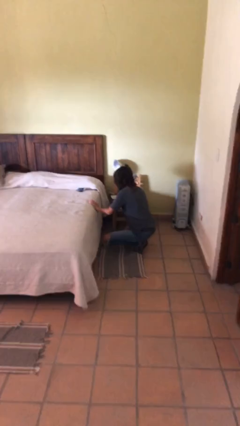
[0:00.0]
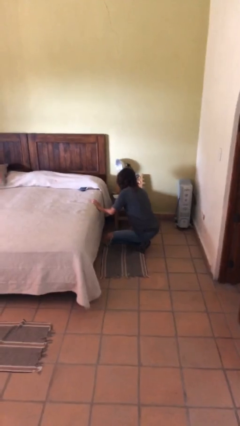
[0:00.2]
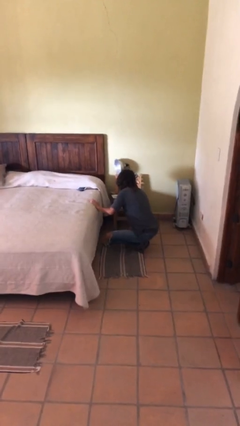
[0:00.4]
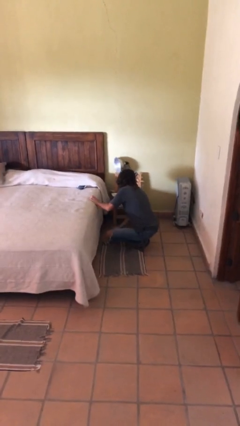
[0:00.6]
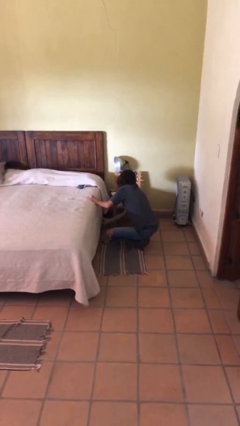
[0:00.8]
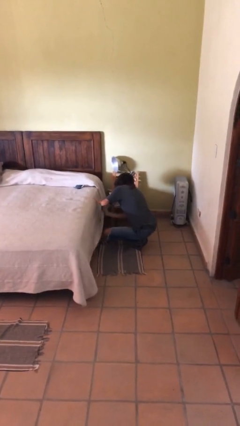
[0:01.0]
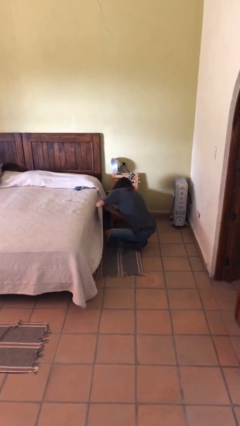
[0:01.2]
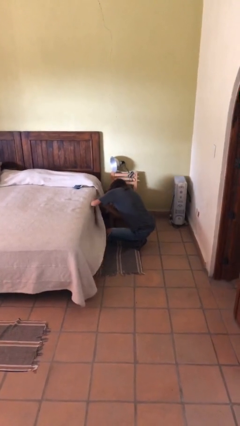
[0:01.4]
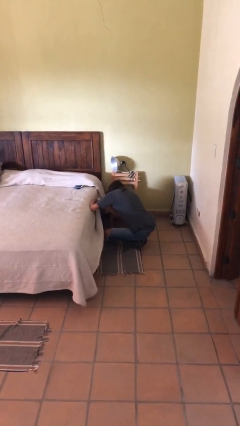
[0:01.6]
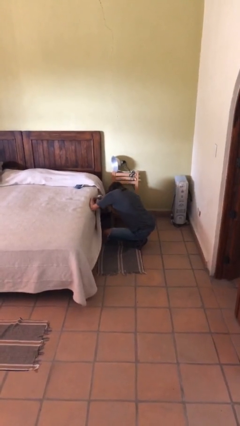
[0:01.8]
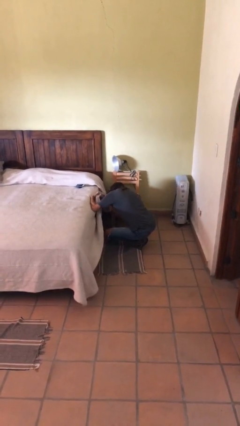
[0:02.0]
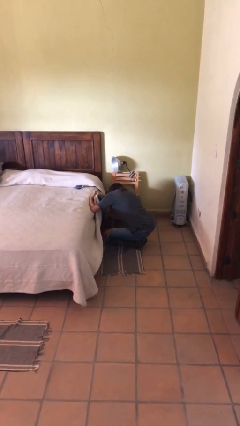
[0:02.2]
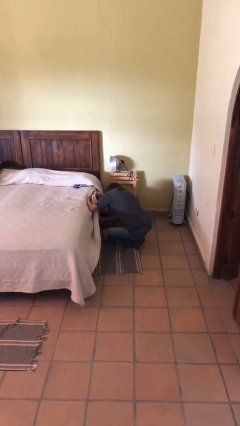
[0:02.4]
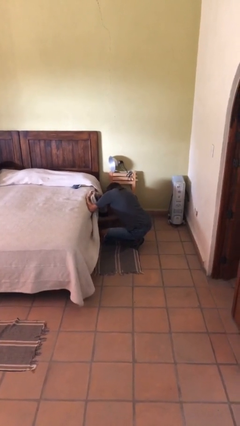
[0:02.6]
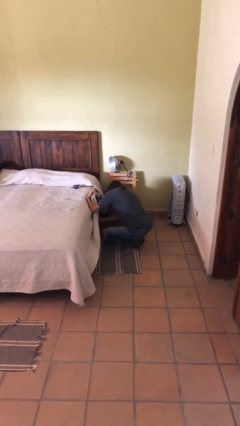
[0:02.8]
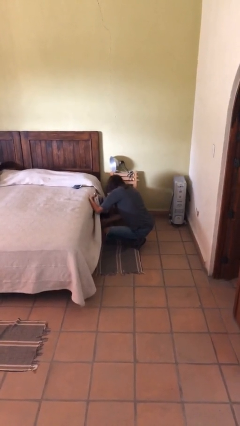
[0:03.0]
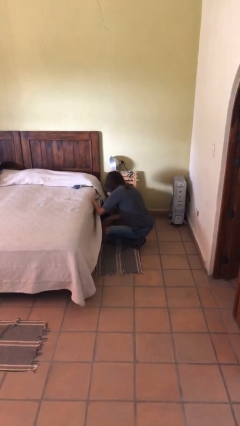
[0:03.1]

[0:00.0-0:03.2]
person searches under bed

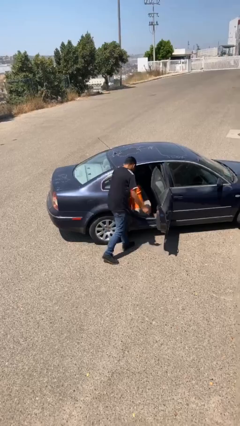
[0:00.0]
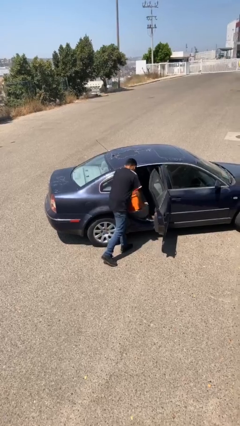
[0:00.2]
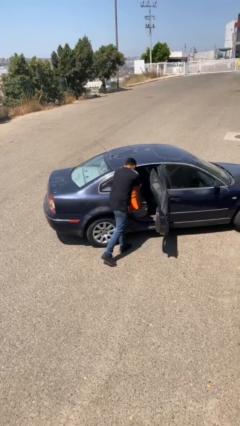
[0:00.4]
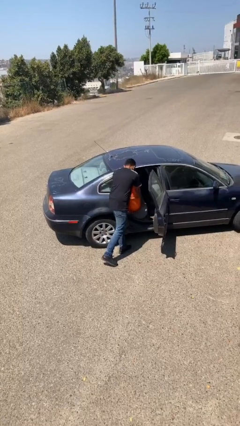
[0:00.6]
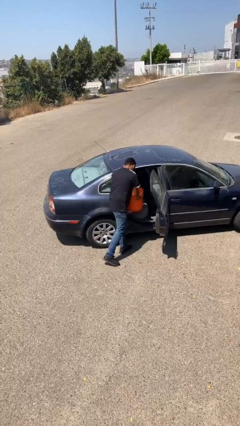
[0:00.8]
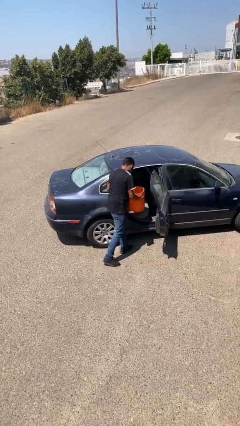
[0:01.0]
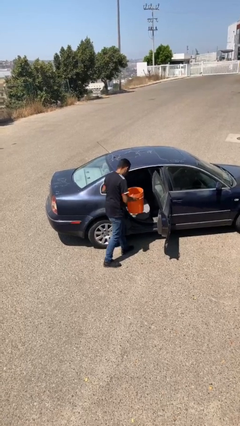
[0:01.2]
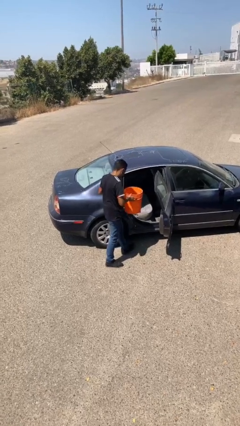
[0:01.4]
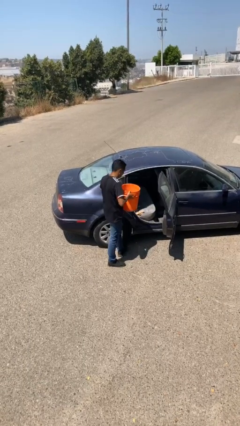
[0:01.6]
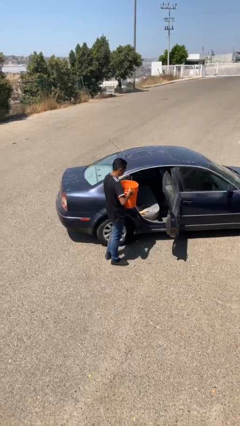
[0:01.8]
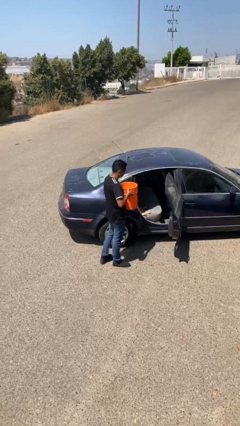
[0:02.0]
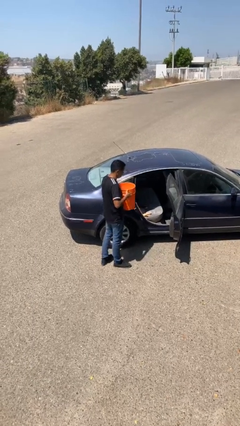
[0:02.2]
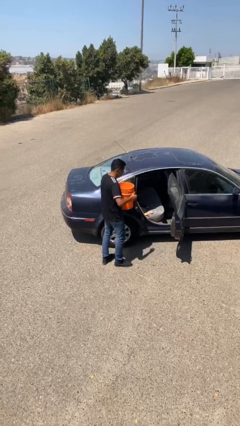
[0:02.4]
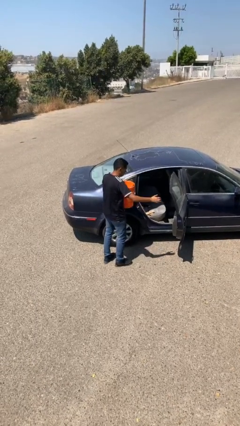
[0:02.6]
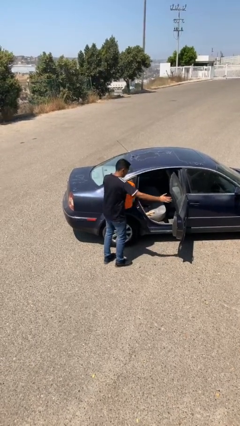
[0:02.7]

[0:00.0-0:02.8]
person unloads car

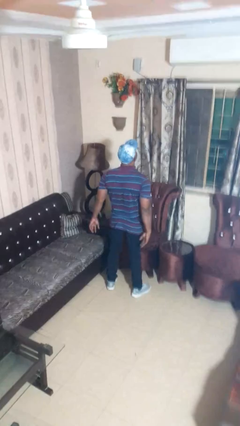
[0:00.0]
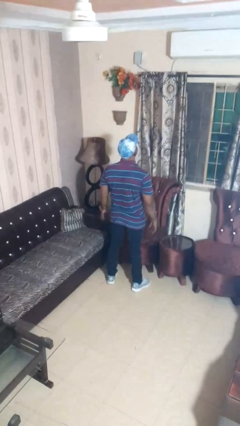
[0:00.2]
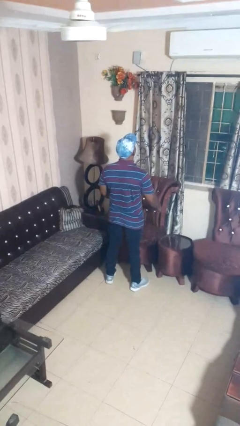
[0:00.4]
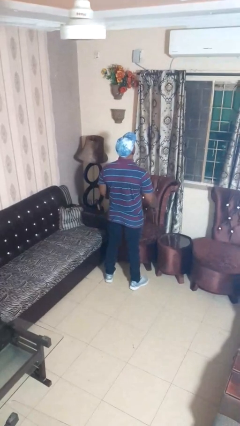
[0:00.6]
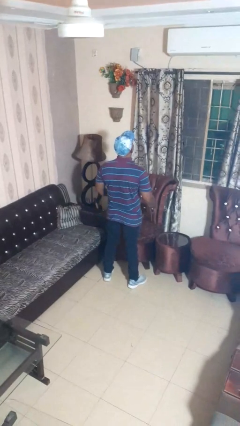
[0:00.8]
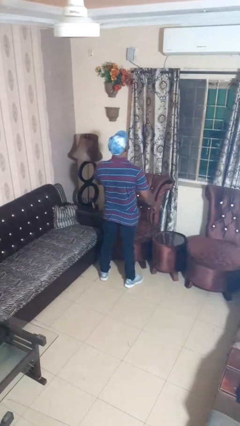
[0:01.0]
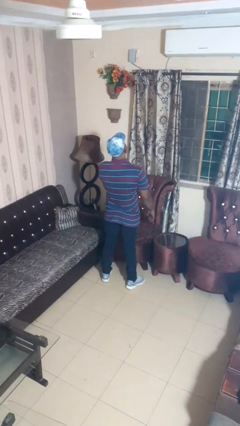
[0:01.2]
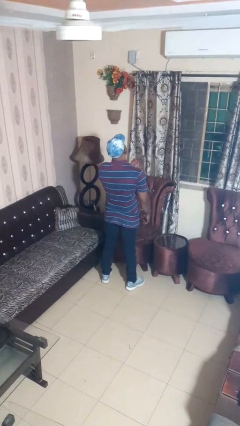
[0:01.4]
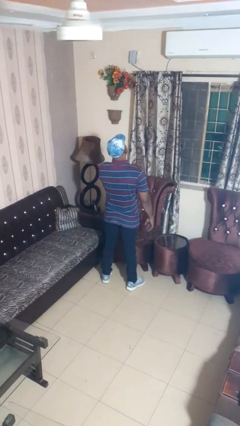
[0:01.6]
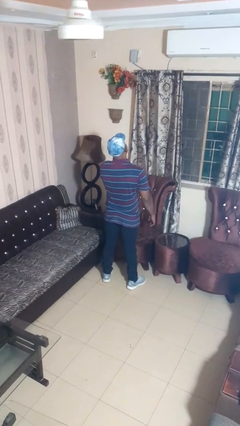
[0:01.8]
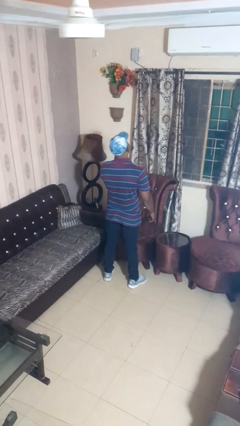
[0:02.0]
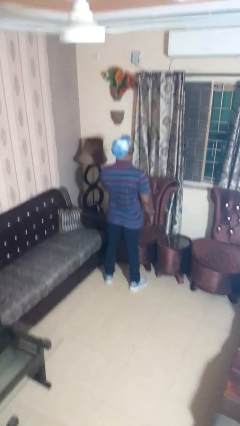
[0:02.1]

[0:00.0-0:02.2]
person drums on chest

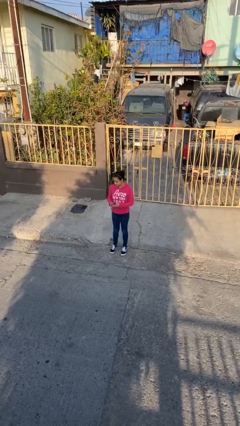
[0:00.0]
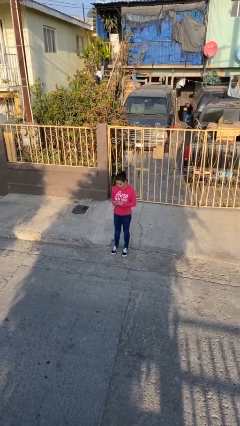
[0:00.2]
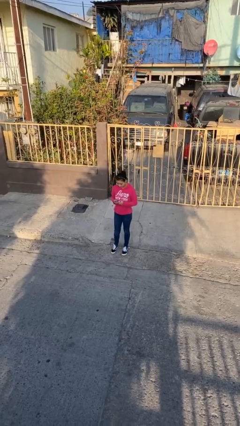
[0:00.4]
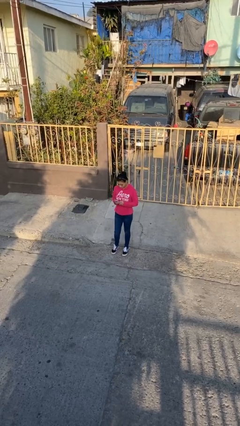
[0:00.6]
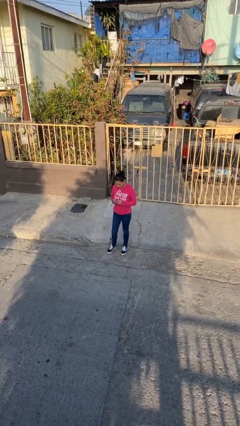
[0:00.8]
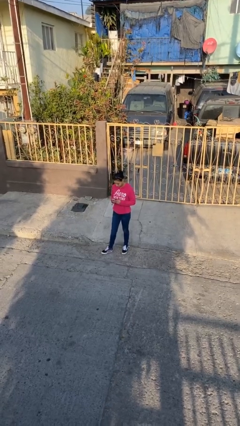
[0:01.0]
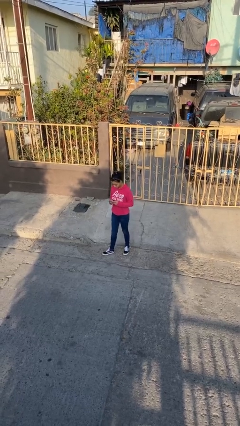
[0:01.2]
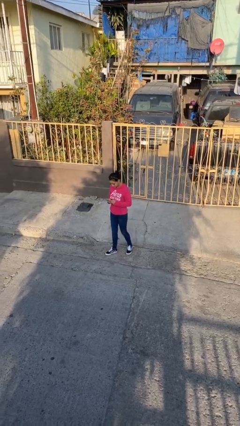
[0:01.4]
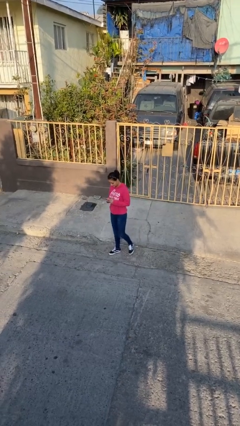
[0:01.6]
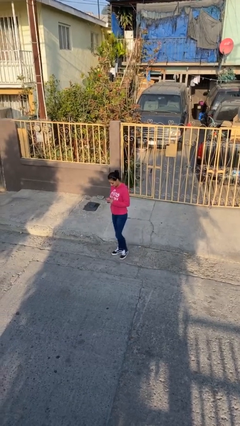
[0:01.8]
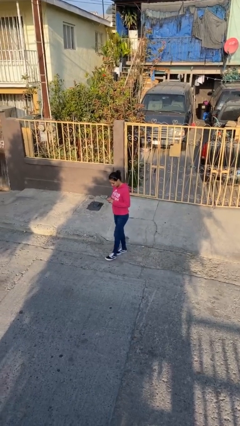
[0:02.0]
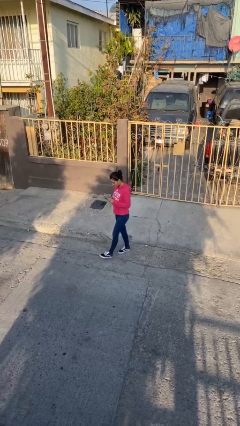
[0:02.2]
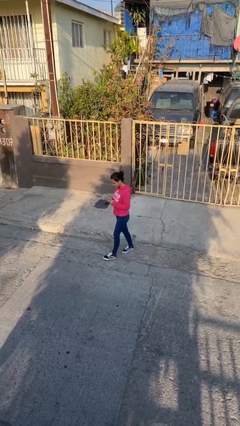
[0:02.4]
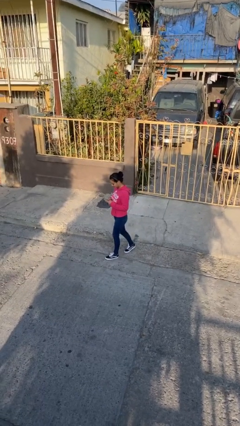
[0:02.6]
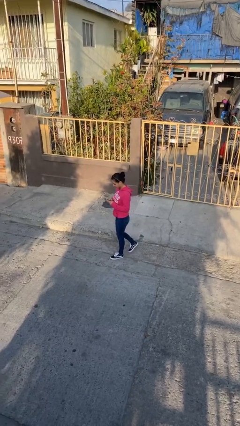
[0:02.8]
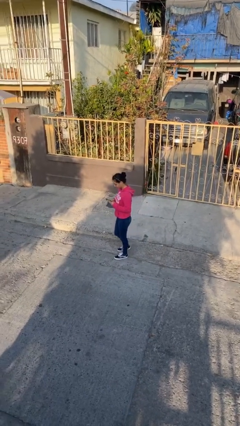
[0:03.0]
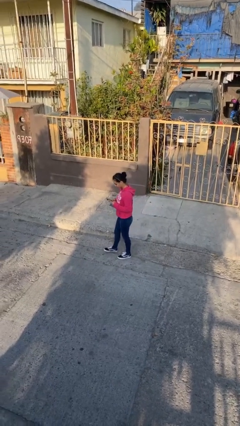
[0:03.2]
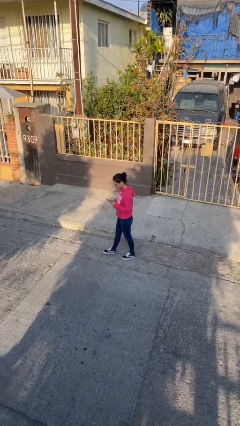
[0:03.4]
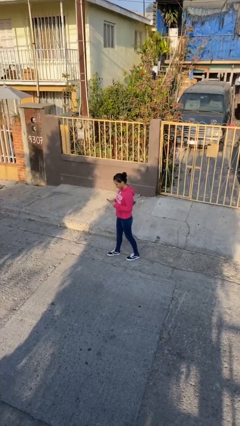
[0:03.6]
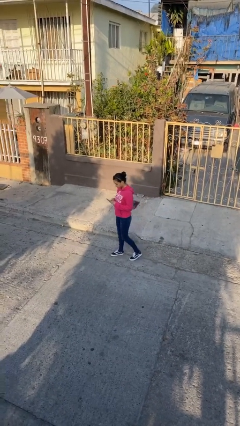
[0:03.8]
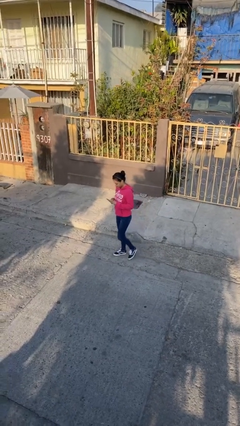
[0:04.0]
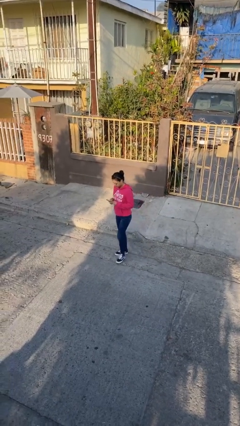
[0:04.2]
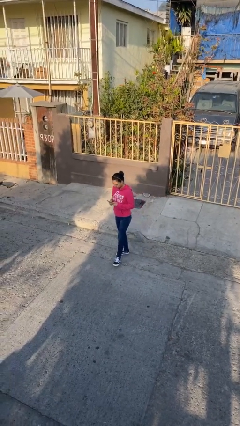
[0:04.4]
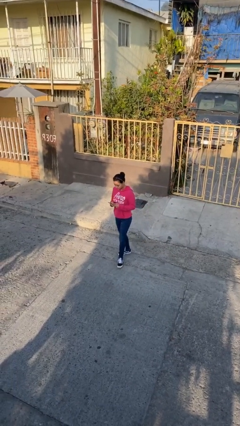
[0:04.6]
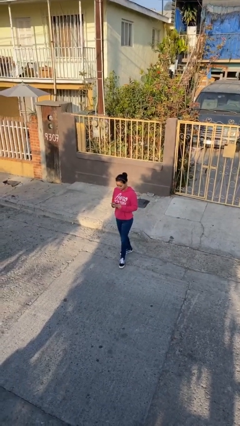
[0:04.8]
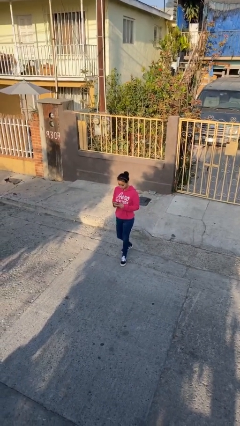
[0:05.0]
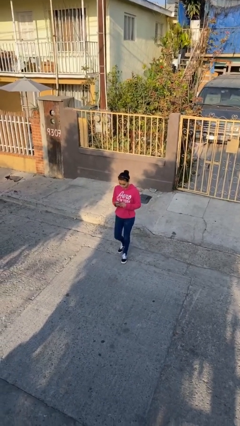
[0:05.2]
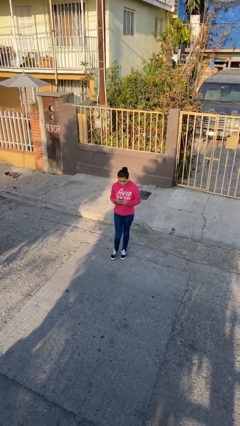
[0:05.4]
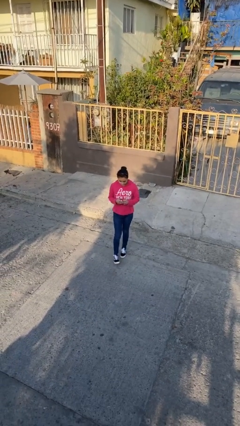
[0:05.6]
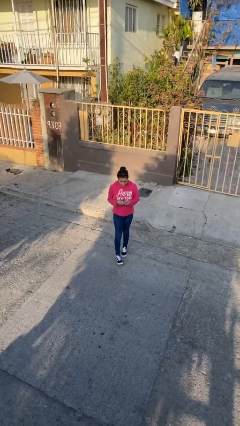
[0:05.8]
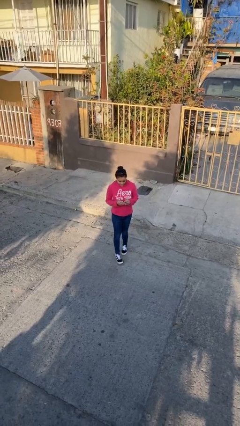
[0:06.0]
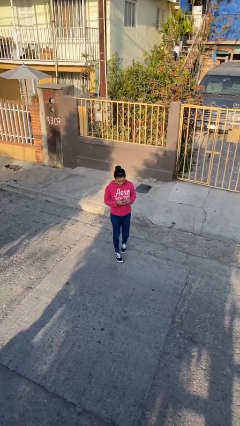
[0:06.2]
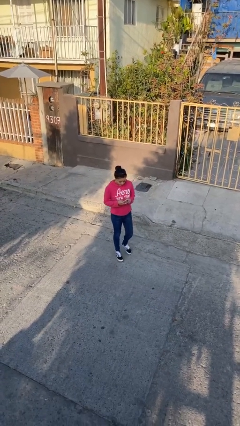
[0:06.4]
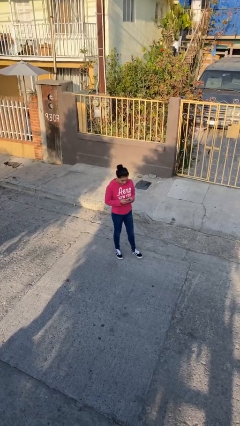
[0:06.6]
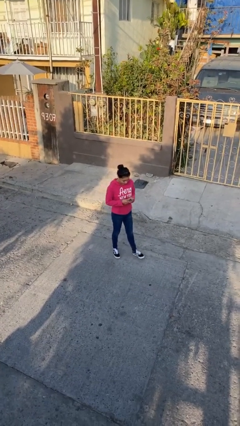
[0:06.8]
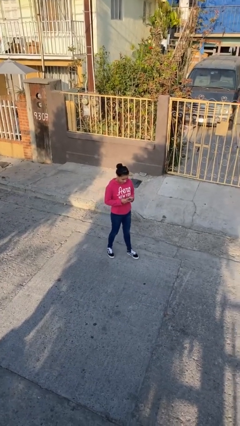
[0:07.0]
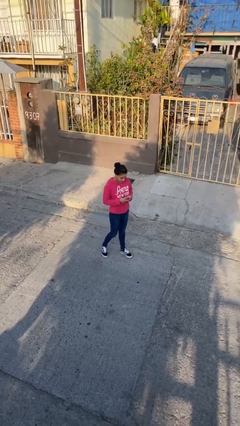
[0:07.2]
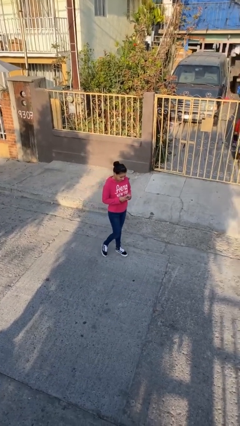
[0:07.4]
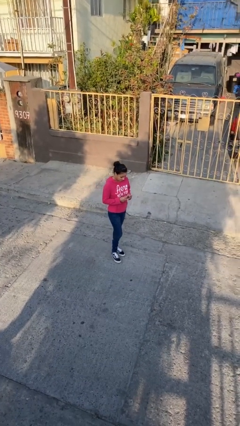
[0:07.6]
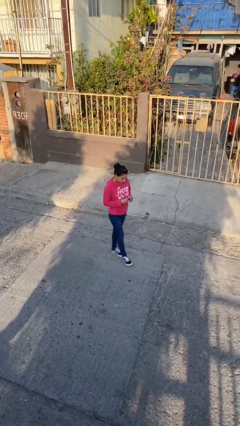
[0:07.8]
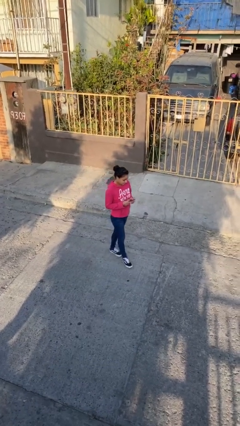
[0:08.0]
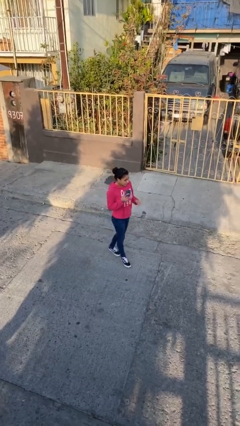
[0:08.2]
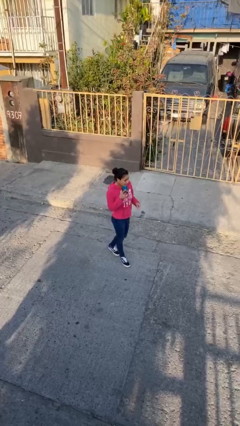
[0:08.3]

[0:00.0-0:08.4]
person texts on phone

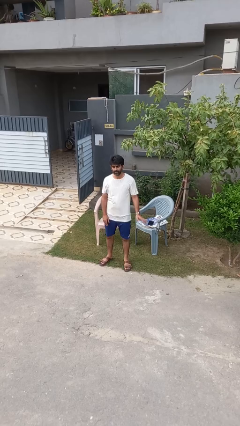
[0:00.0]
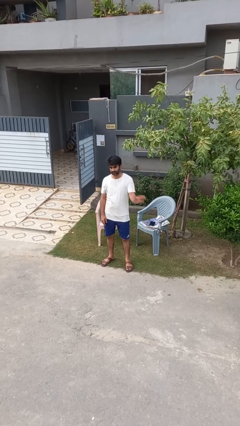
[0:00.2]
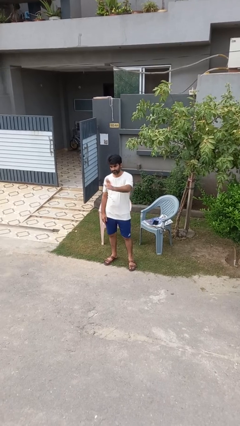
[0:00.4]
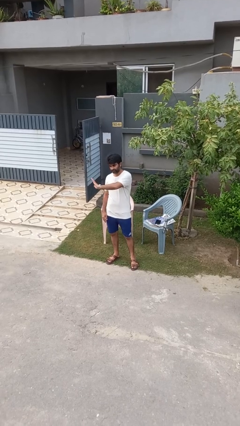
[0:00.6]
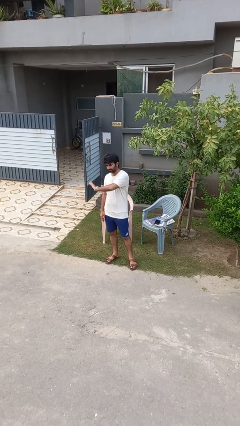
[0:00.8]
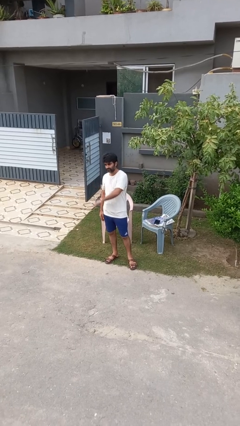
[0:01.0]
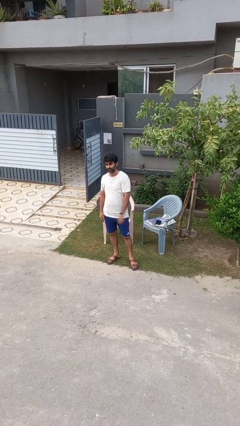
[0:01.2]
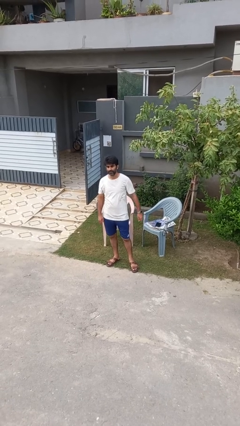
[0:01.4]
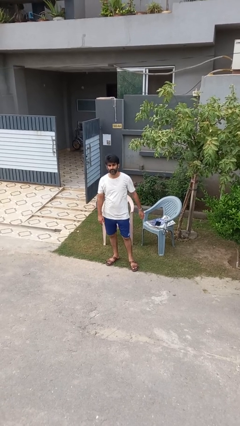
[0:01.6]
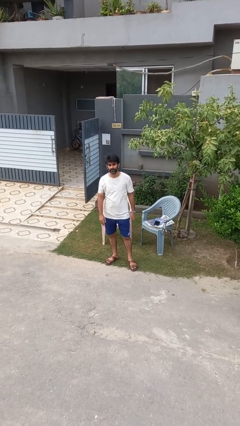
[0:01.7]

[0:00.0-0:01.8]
person gestures swipe right
